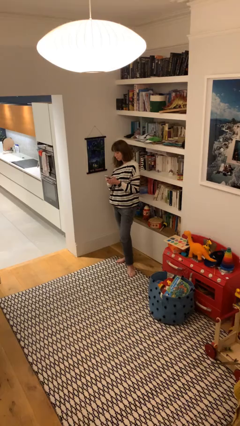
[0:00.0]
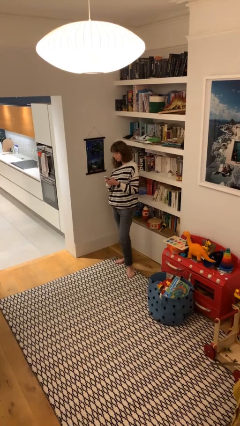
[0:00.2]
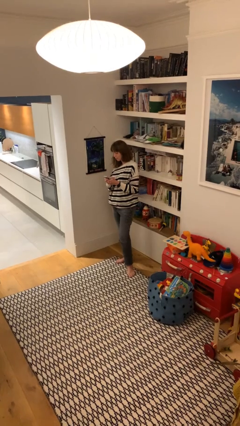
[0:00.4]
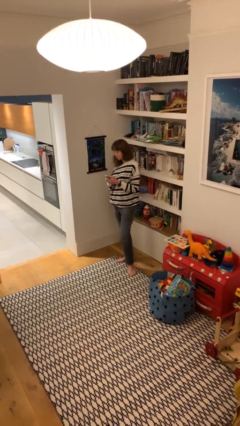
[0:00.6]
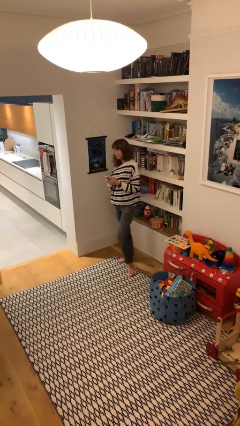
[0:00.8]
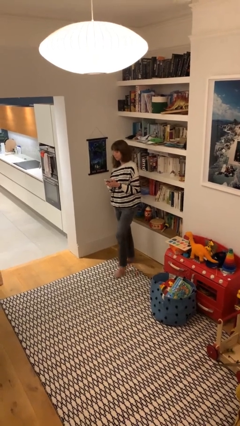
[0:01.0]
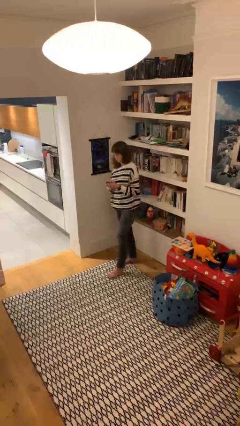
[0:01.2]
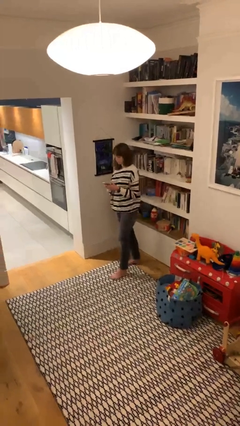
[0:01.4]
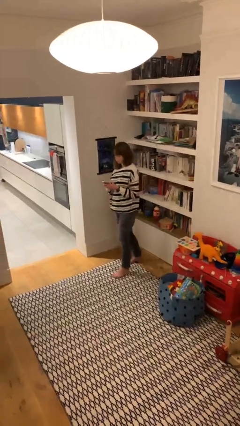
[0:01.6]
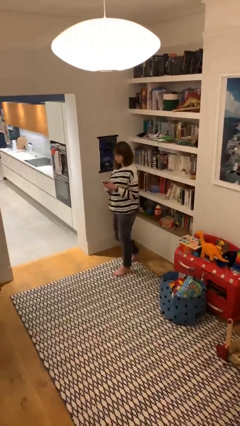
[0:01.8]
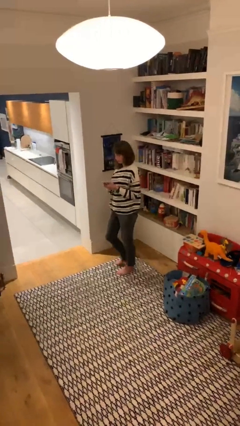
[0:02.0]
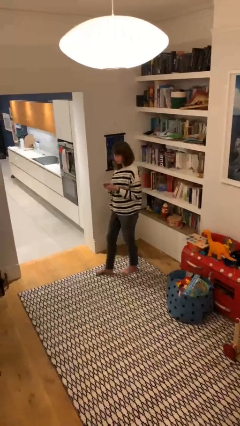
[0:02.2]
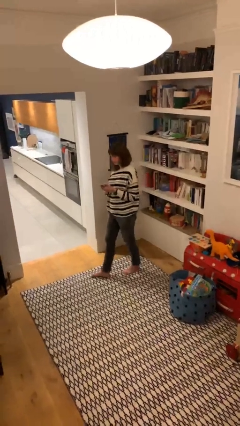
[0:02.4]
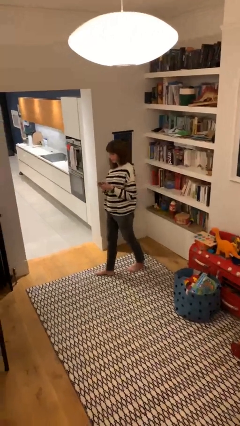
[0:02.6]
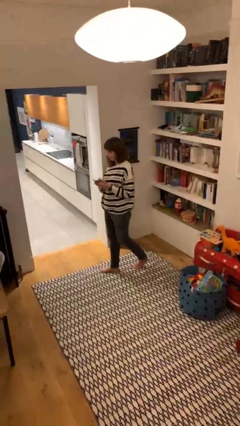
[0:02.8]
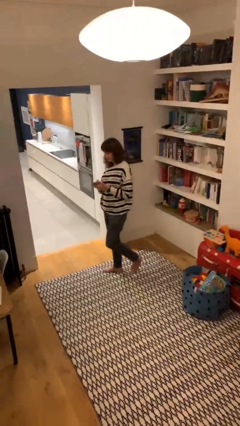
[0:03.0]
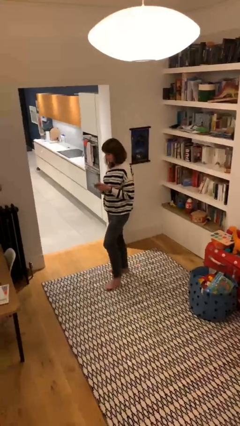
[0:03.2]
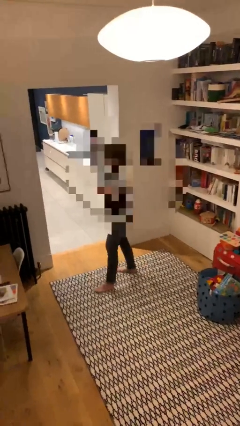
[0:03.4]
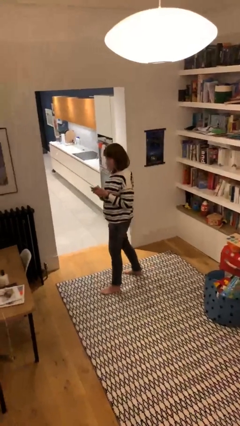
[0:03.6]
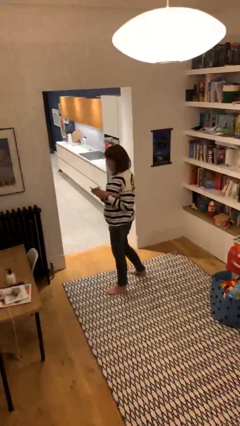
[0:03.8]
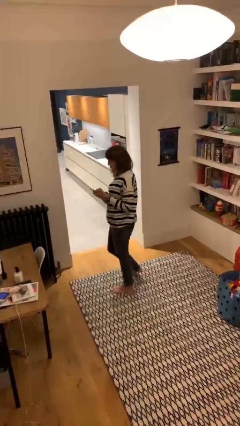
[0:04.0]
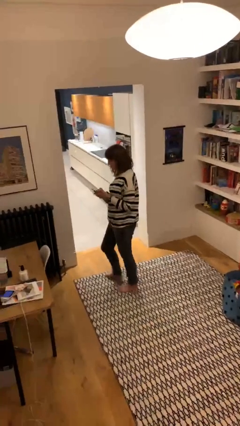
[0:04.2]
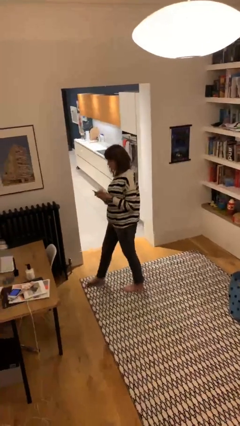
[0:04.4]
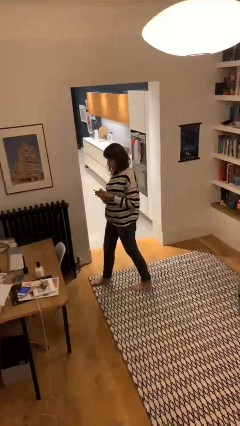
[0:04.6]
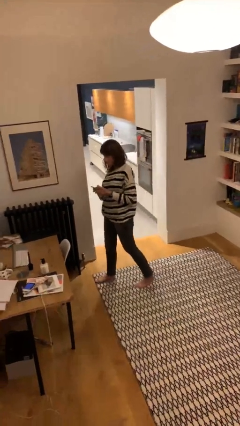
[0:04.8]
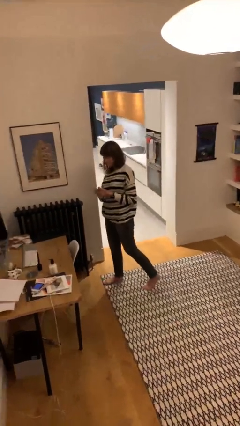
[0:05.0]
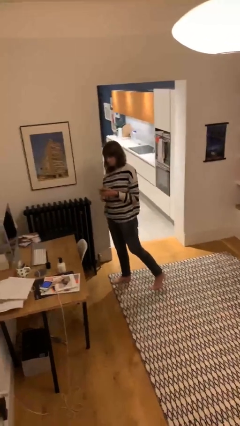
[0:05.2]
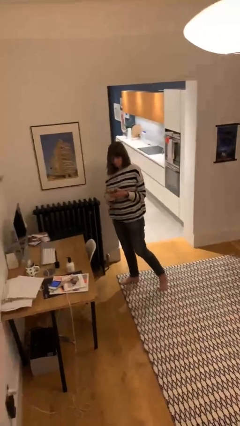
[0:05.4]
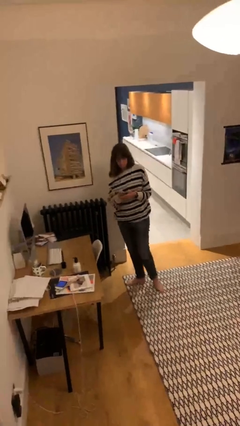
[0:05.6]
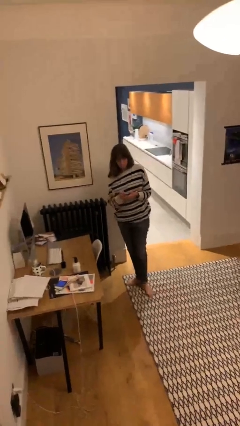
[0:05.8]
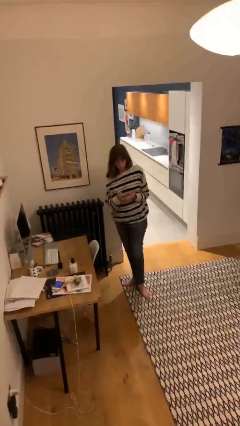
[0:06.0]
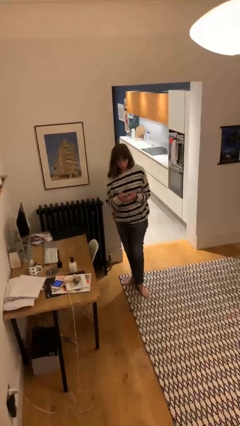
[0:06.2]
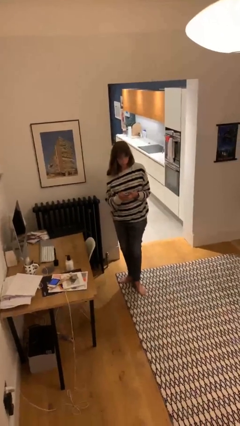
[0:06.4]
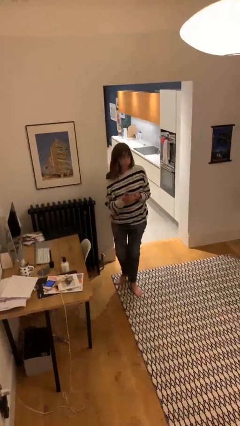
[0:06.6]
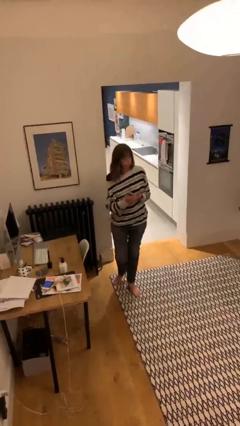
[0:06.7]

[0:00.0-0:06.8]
person texts on phone

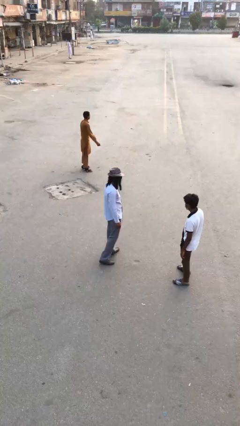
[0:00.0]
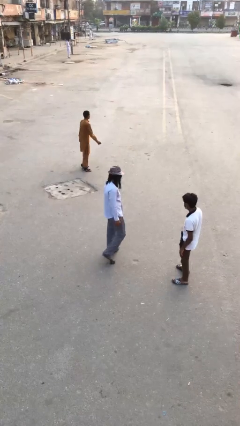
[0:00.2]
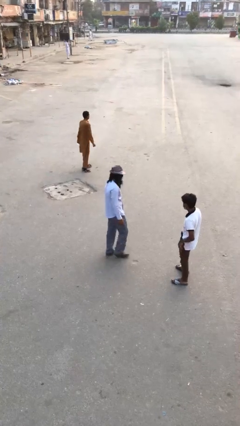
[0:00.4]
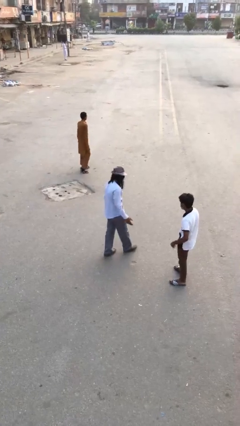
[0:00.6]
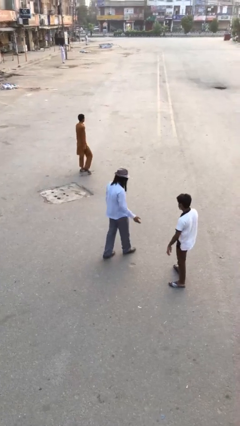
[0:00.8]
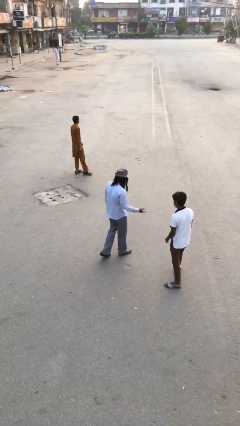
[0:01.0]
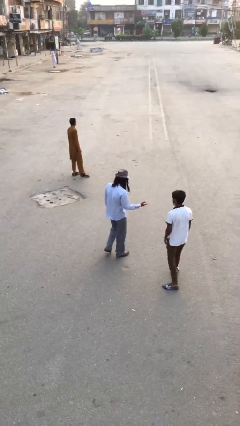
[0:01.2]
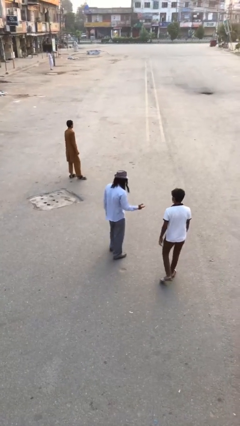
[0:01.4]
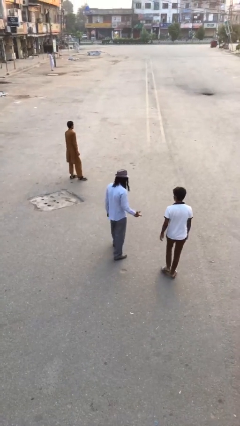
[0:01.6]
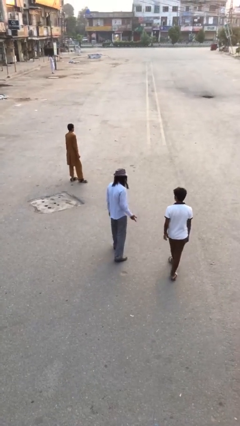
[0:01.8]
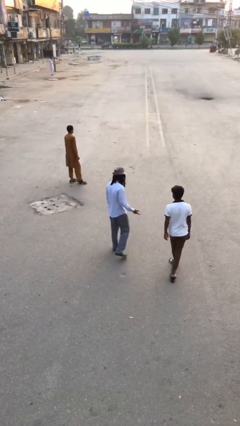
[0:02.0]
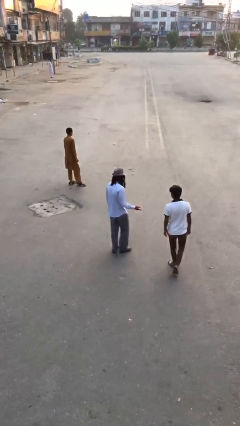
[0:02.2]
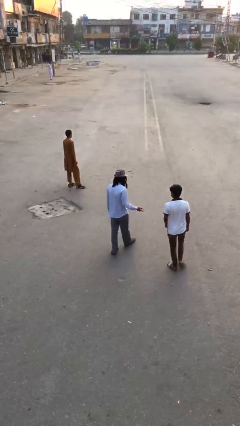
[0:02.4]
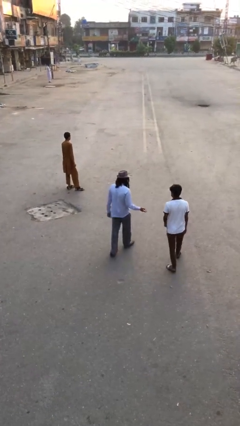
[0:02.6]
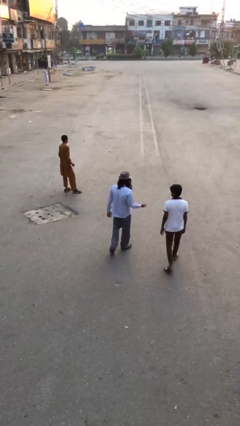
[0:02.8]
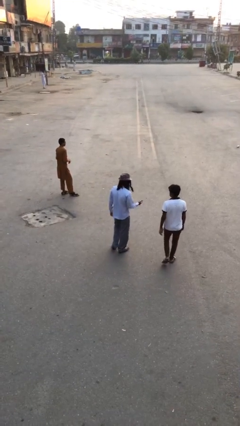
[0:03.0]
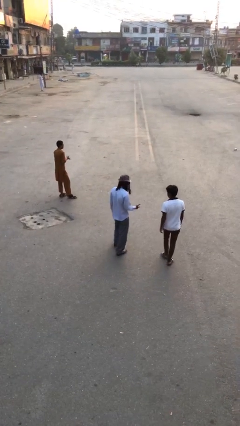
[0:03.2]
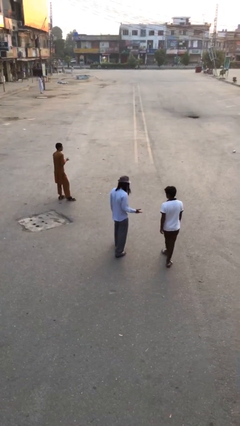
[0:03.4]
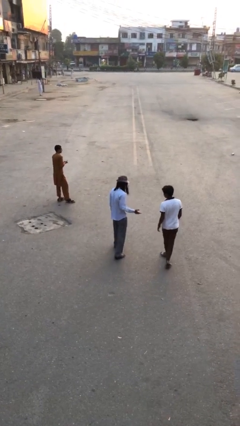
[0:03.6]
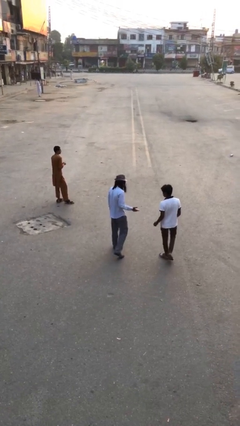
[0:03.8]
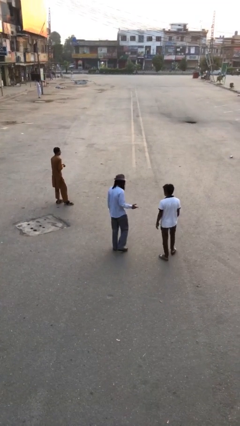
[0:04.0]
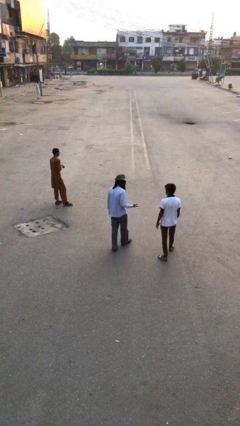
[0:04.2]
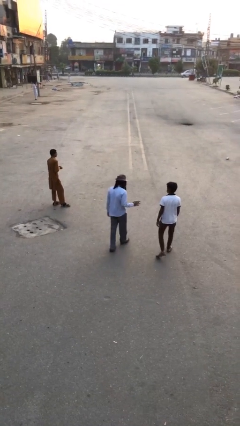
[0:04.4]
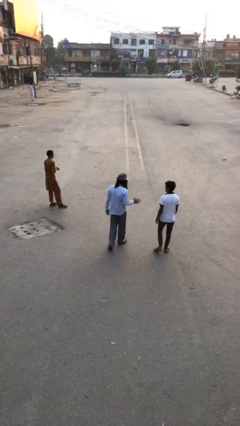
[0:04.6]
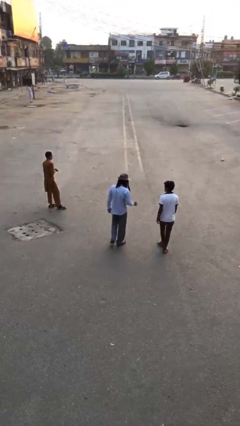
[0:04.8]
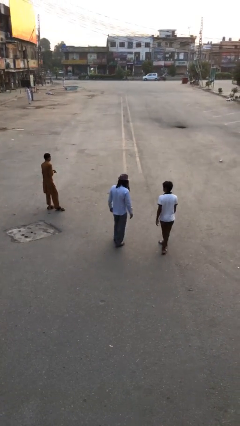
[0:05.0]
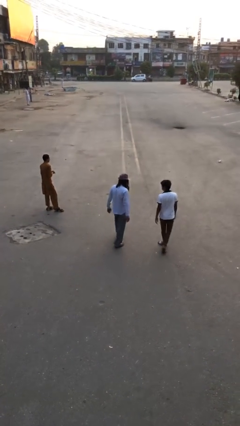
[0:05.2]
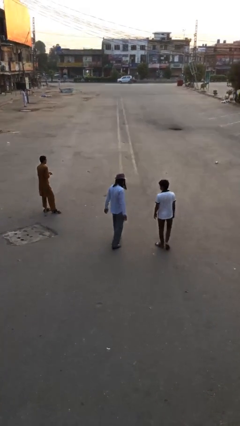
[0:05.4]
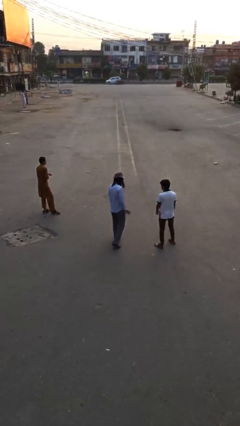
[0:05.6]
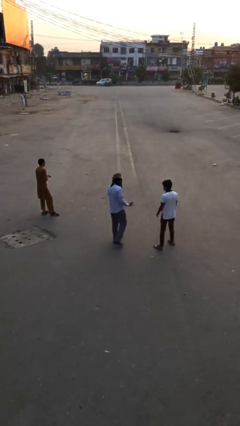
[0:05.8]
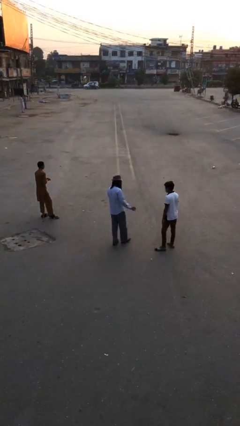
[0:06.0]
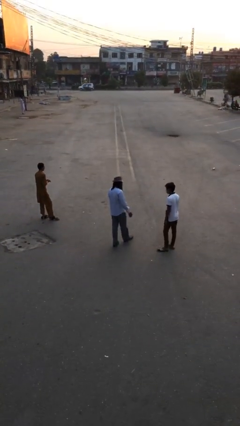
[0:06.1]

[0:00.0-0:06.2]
person talks to person

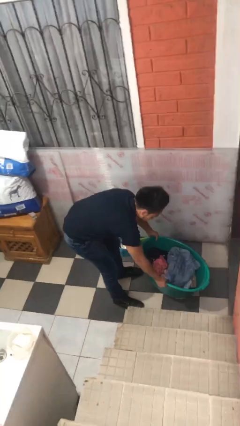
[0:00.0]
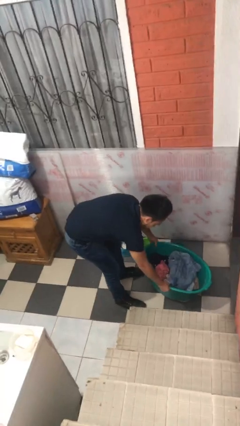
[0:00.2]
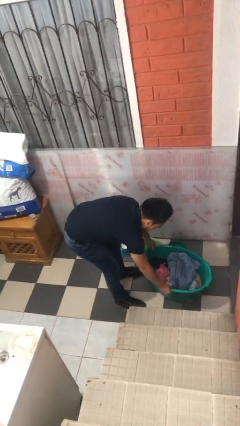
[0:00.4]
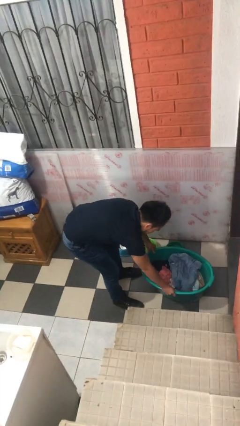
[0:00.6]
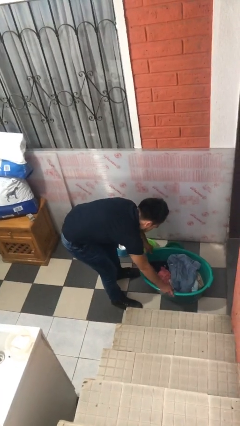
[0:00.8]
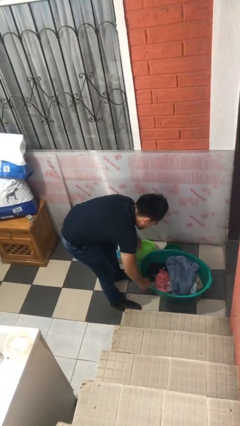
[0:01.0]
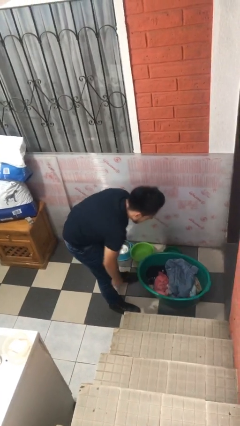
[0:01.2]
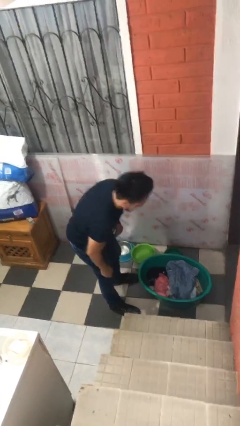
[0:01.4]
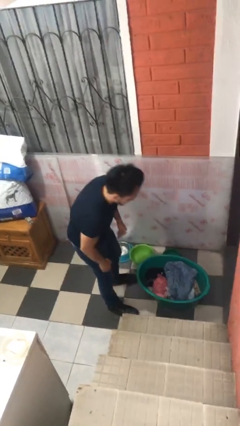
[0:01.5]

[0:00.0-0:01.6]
person puts down object on floor

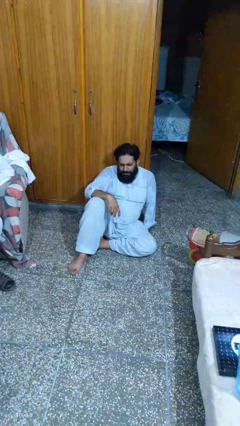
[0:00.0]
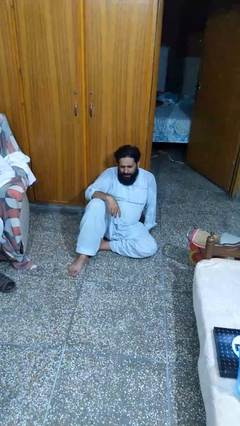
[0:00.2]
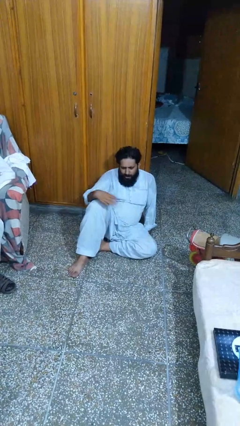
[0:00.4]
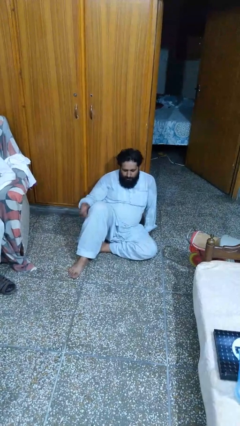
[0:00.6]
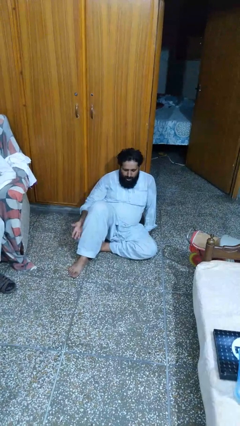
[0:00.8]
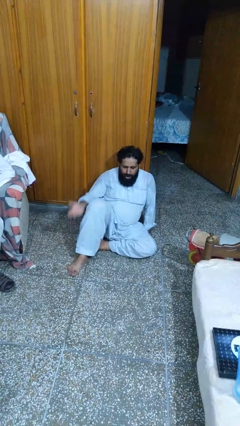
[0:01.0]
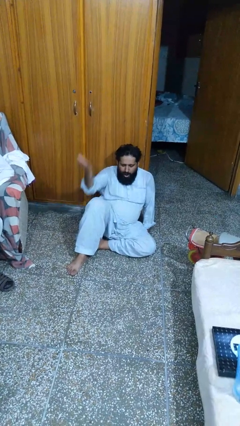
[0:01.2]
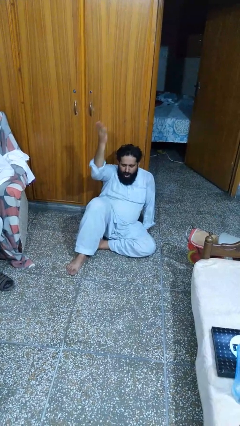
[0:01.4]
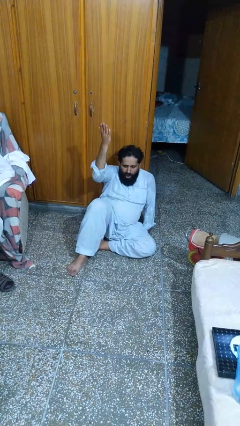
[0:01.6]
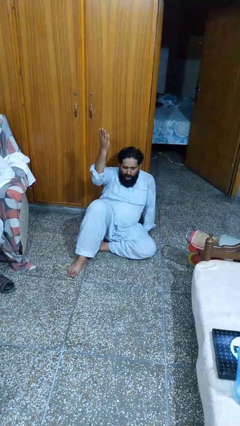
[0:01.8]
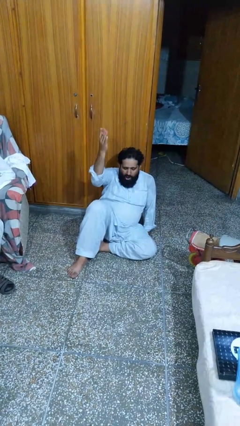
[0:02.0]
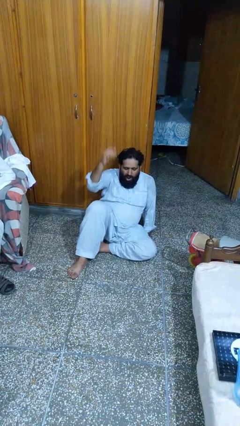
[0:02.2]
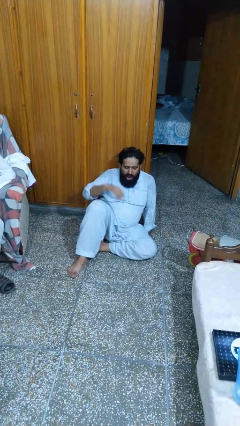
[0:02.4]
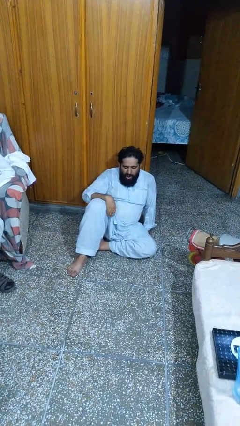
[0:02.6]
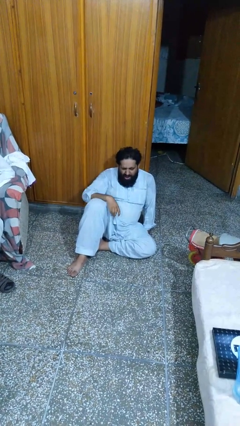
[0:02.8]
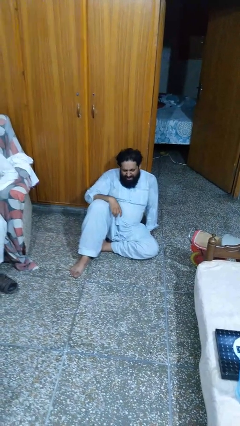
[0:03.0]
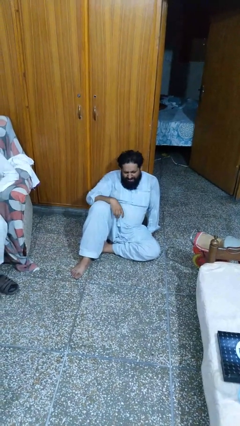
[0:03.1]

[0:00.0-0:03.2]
person gestures swipe up

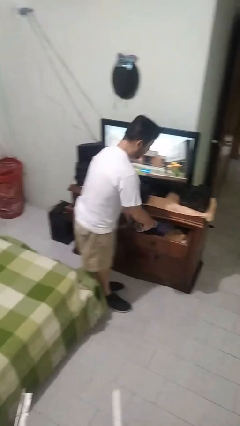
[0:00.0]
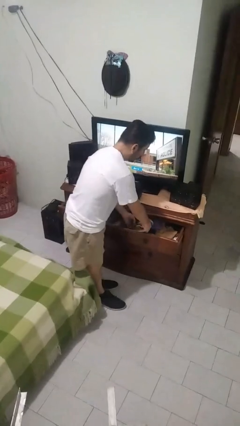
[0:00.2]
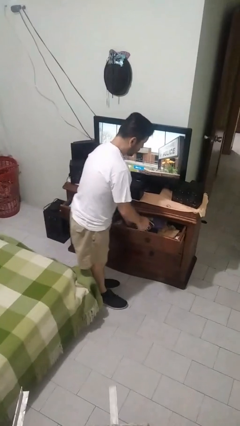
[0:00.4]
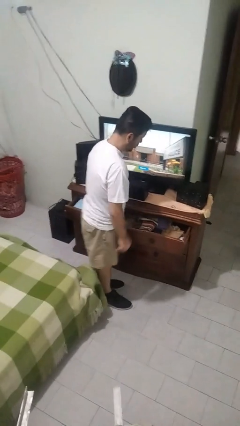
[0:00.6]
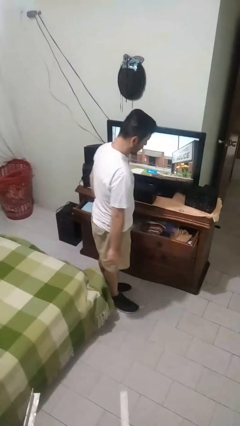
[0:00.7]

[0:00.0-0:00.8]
person puts clothes into dresser
